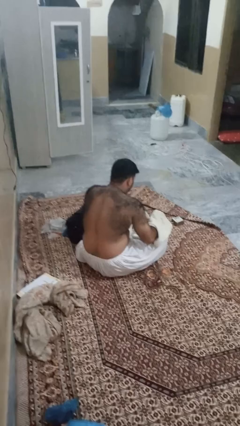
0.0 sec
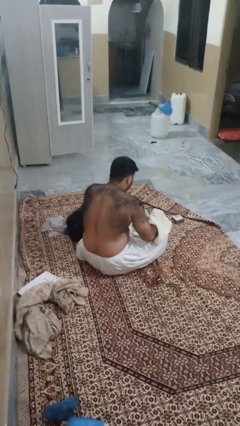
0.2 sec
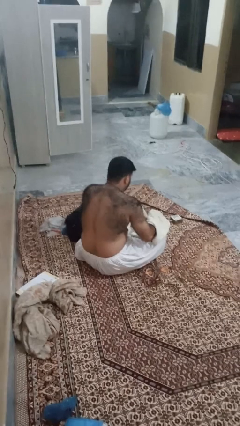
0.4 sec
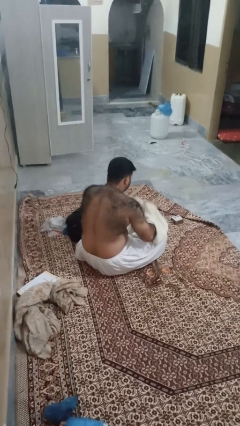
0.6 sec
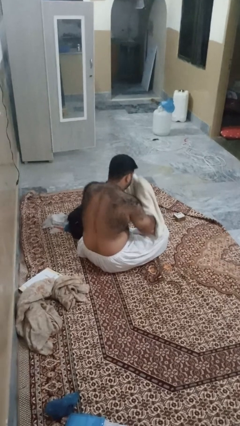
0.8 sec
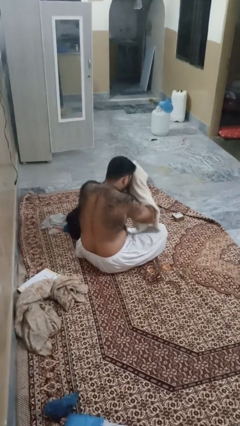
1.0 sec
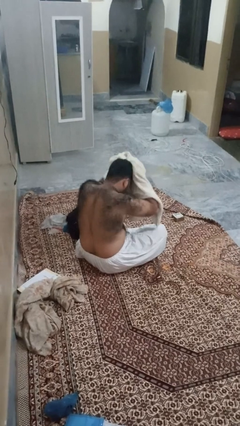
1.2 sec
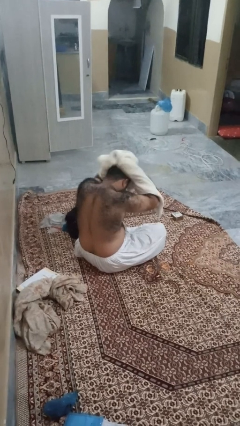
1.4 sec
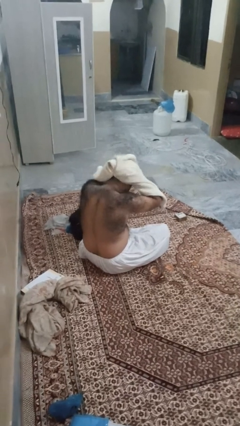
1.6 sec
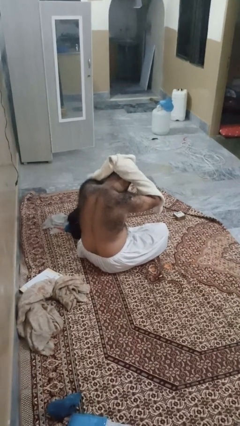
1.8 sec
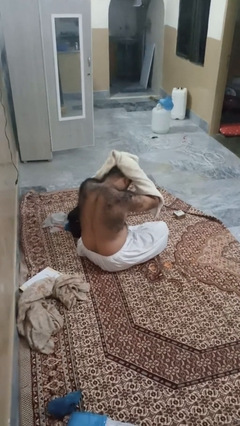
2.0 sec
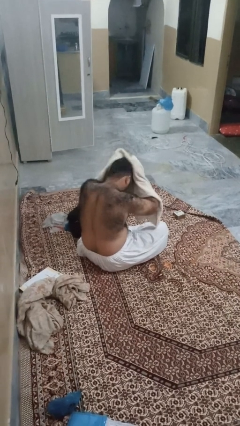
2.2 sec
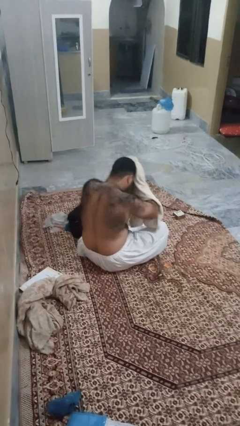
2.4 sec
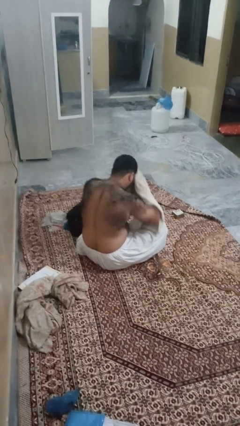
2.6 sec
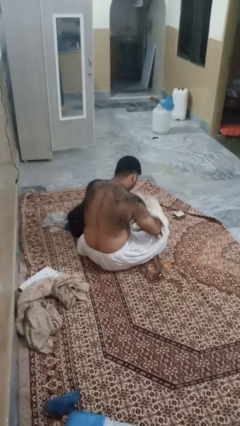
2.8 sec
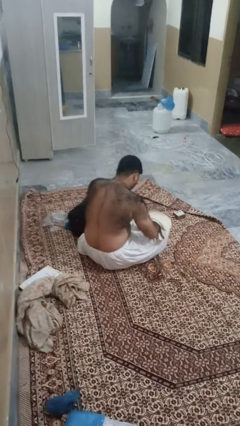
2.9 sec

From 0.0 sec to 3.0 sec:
person dries hair with towel

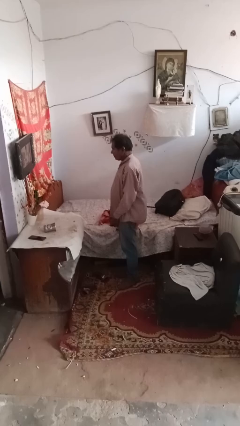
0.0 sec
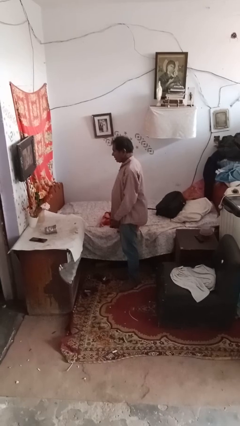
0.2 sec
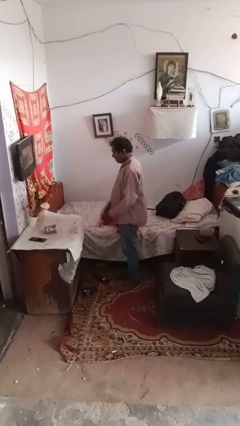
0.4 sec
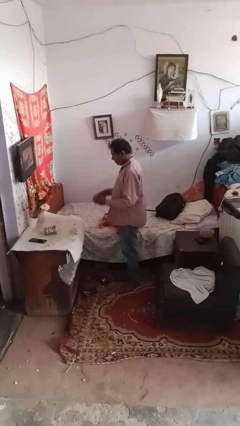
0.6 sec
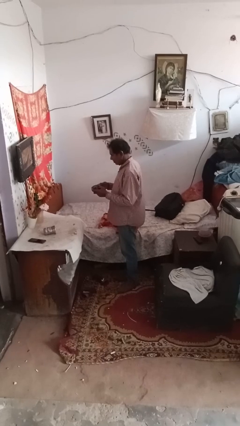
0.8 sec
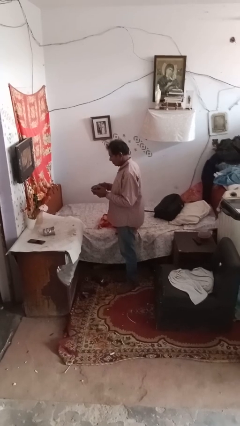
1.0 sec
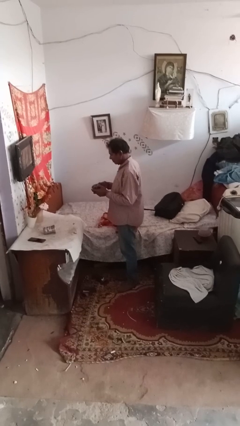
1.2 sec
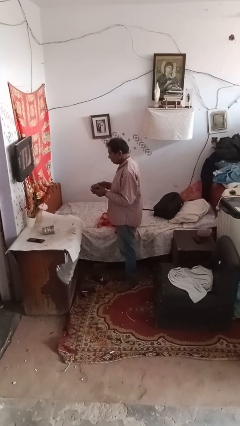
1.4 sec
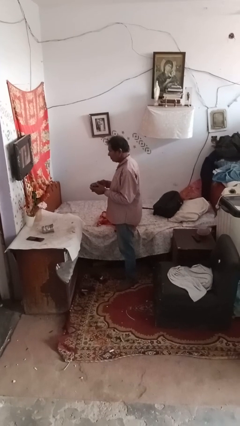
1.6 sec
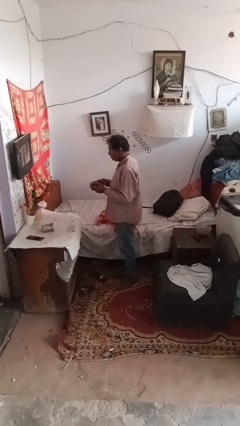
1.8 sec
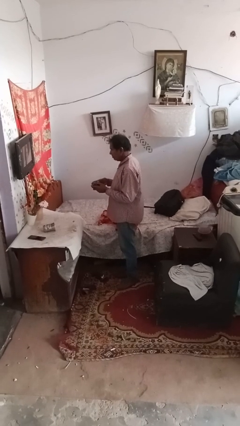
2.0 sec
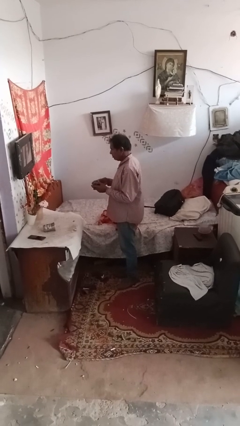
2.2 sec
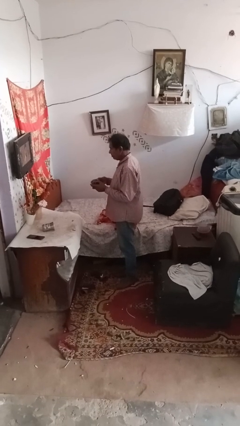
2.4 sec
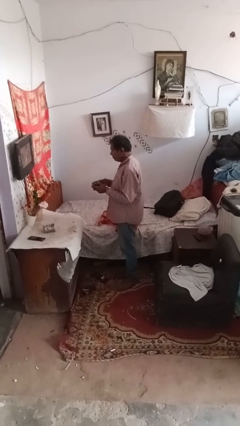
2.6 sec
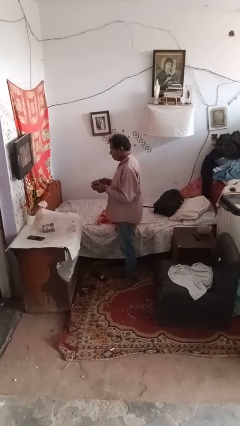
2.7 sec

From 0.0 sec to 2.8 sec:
person interacts with handheld game

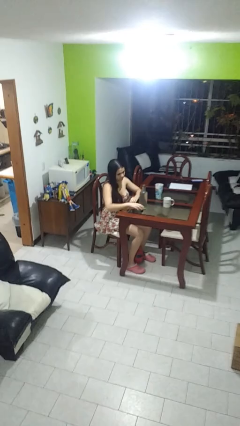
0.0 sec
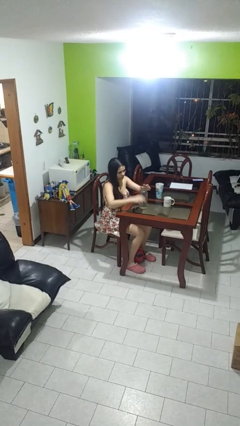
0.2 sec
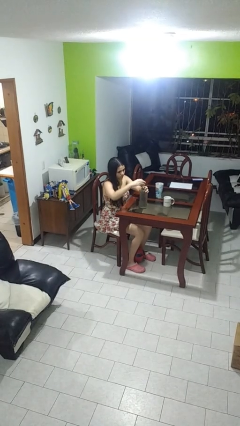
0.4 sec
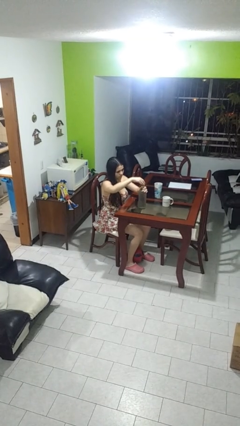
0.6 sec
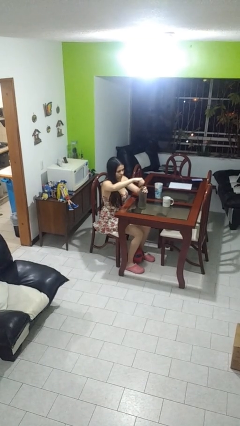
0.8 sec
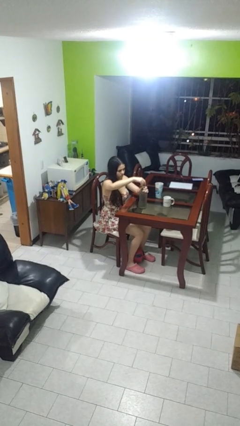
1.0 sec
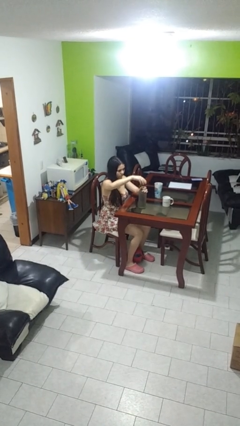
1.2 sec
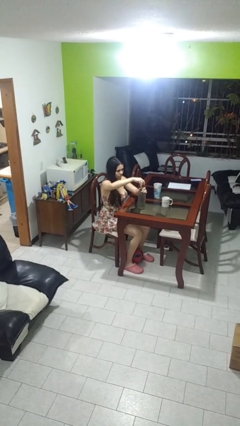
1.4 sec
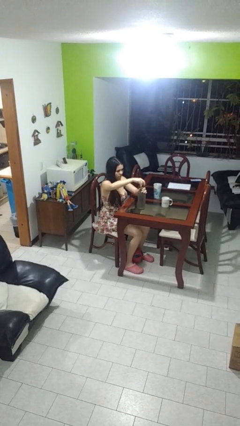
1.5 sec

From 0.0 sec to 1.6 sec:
person screws lid to bottle

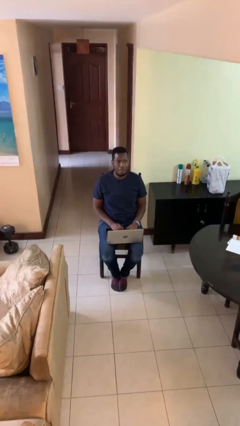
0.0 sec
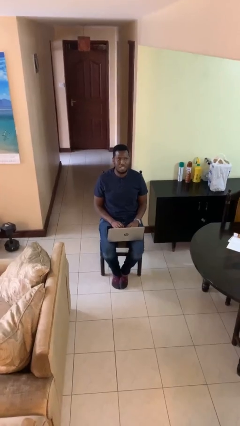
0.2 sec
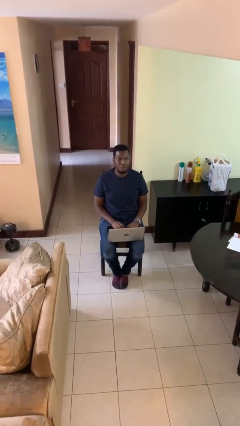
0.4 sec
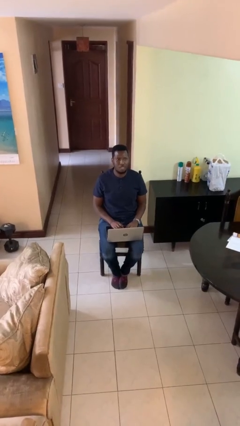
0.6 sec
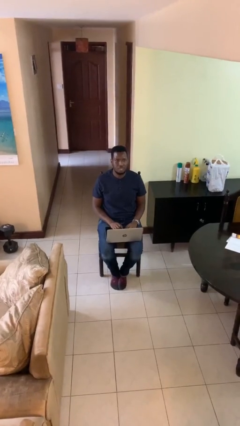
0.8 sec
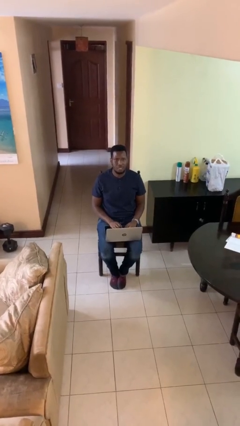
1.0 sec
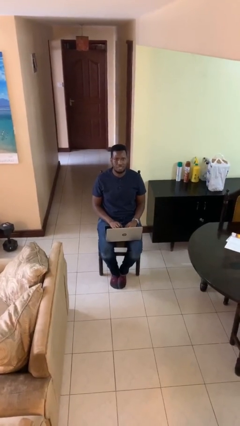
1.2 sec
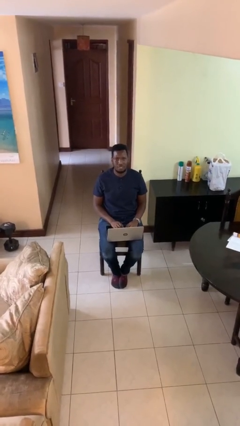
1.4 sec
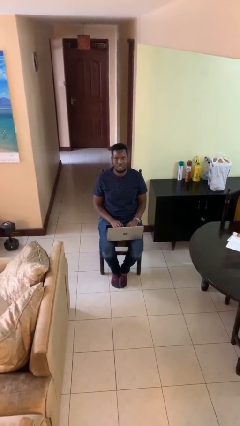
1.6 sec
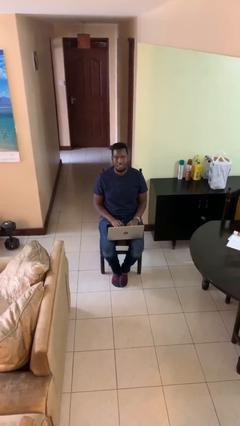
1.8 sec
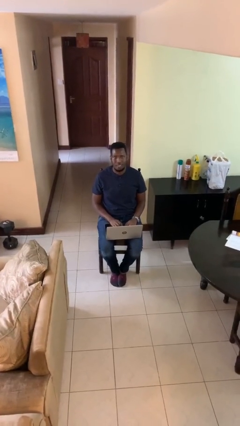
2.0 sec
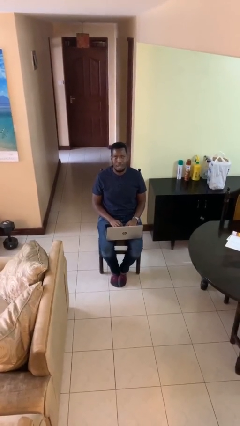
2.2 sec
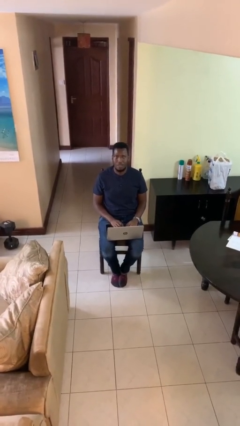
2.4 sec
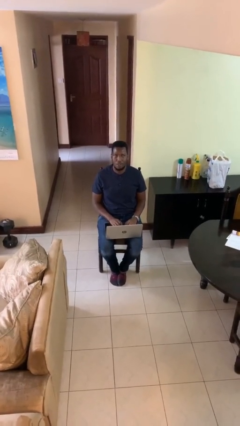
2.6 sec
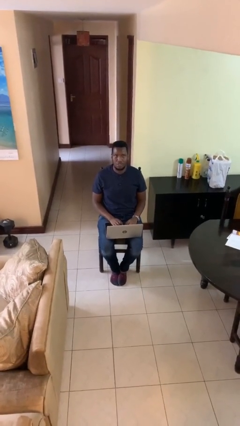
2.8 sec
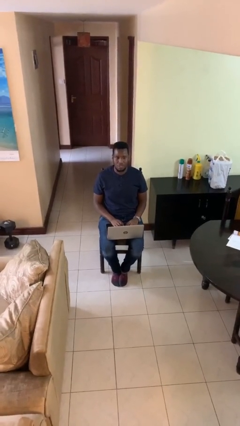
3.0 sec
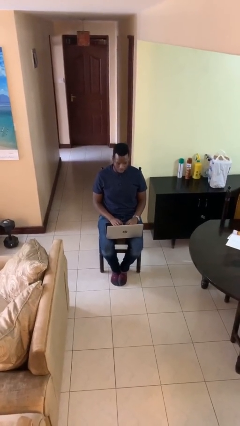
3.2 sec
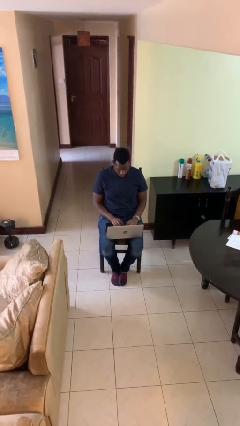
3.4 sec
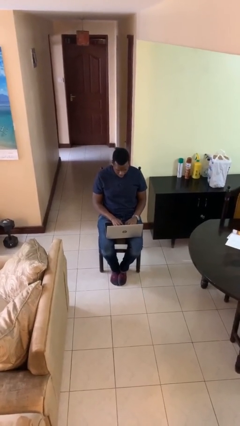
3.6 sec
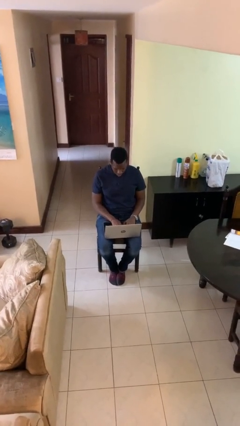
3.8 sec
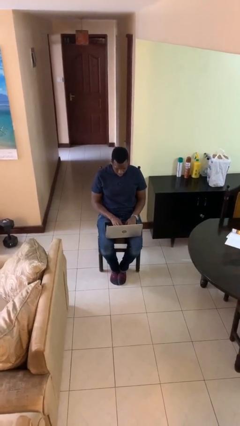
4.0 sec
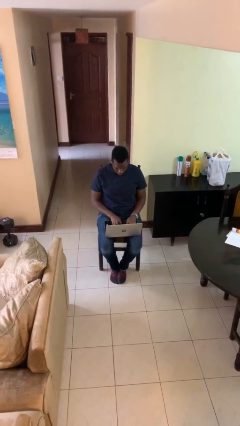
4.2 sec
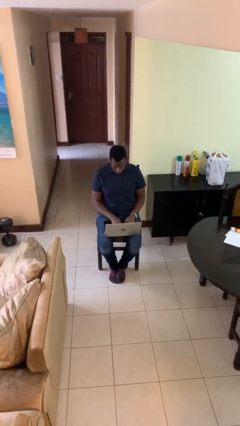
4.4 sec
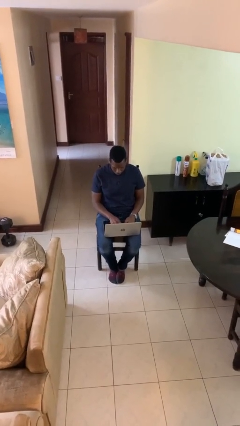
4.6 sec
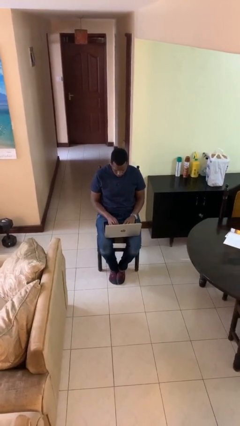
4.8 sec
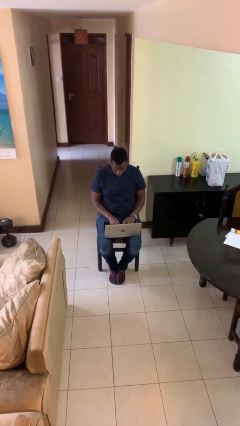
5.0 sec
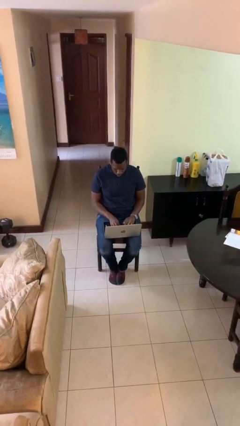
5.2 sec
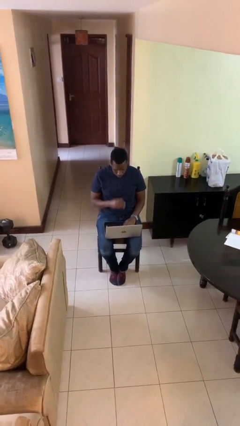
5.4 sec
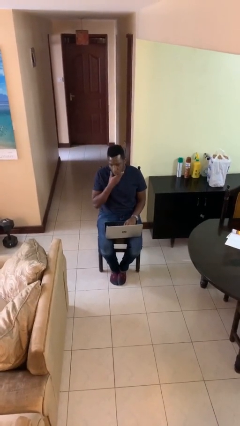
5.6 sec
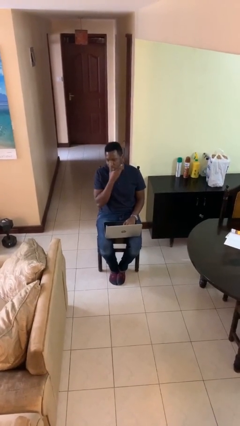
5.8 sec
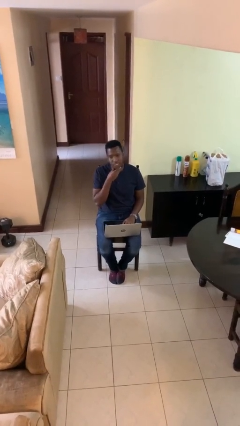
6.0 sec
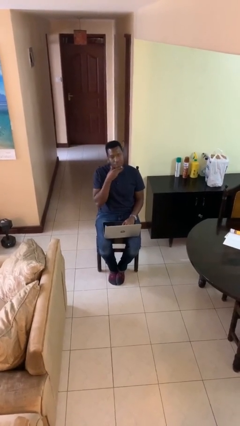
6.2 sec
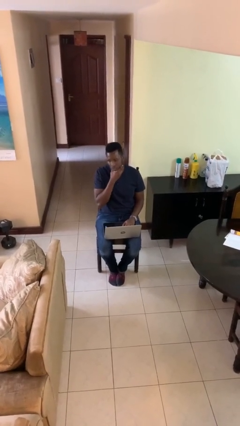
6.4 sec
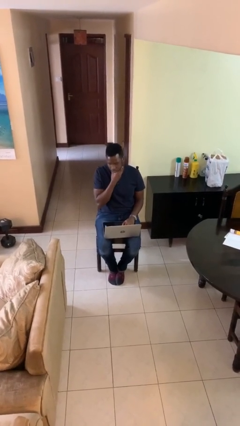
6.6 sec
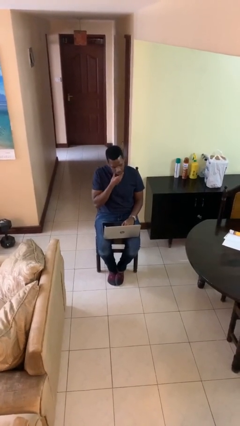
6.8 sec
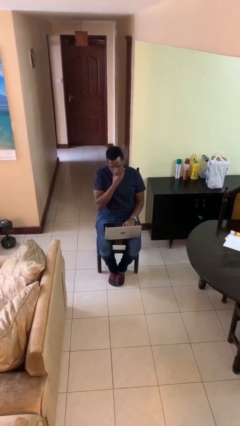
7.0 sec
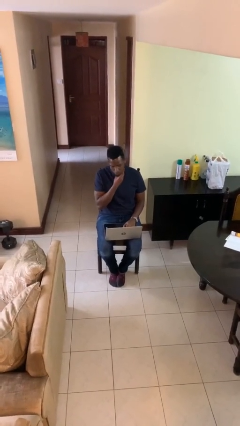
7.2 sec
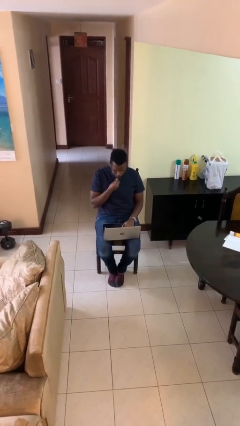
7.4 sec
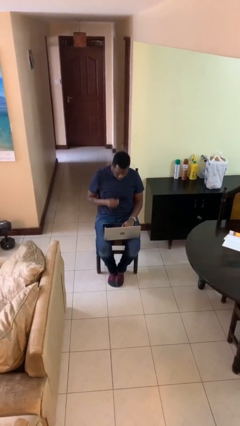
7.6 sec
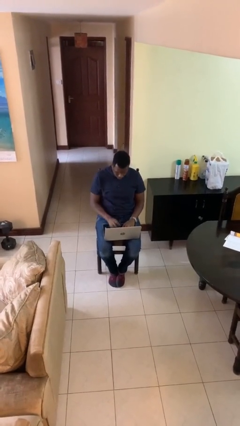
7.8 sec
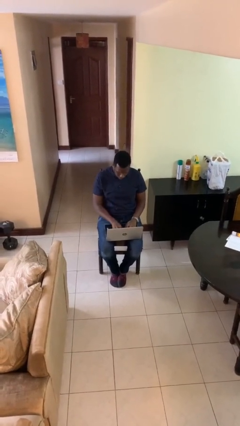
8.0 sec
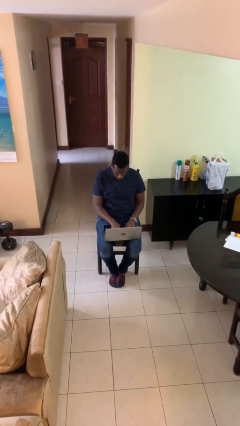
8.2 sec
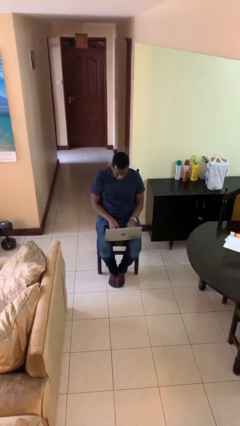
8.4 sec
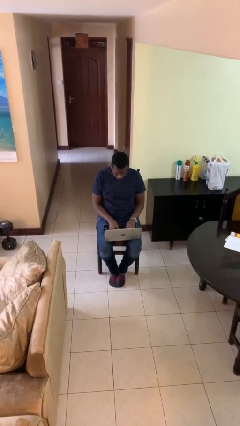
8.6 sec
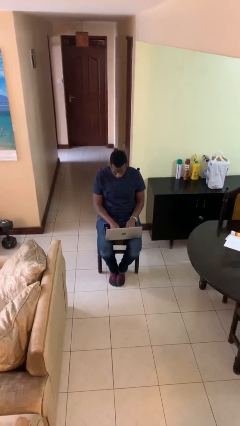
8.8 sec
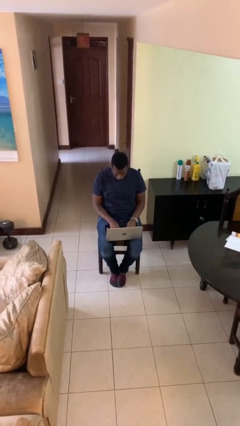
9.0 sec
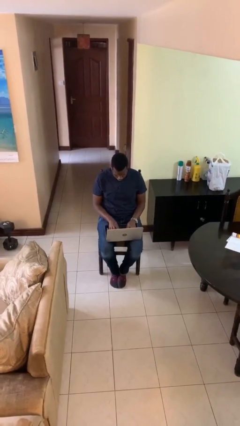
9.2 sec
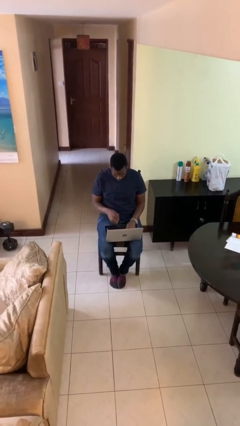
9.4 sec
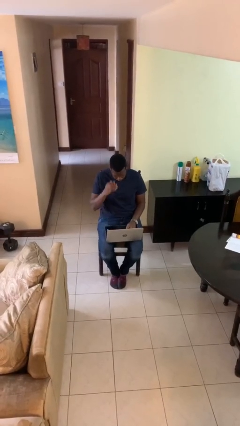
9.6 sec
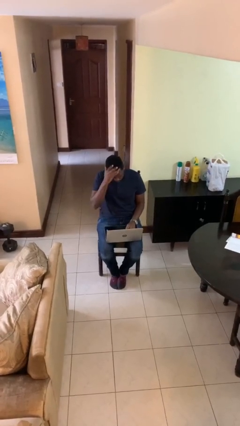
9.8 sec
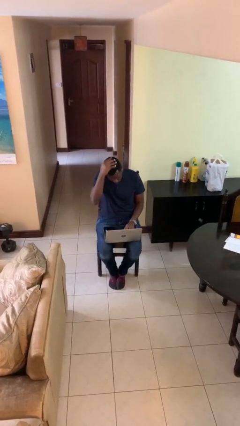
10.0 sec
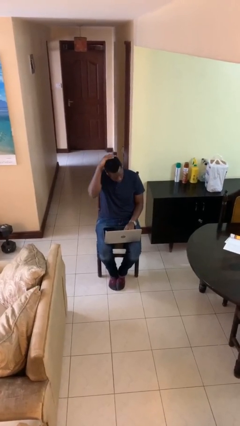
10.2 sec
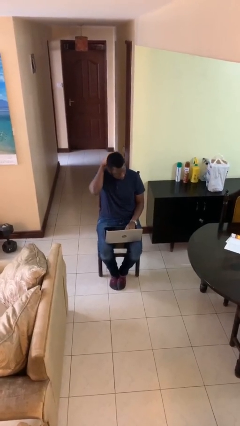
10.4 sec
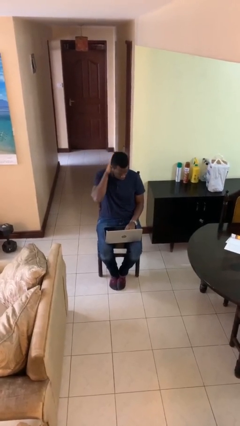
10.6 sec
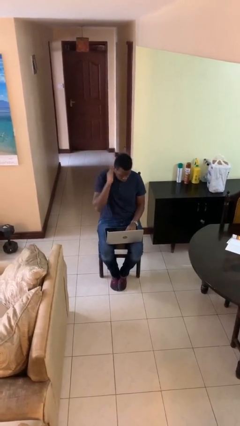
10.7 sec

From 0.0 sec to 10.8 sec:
person interacts with laptop
